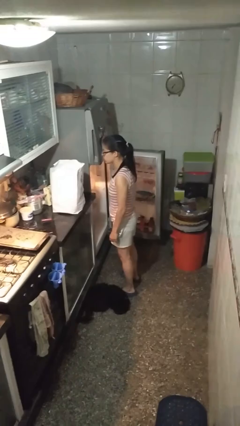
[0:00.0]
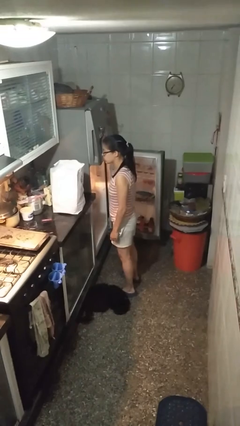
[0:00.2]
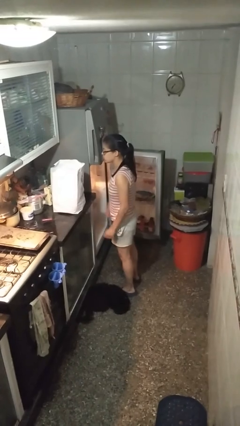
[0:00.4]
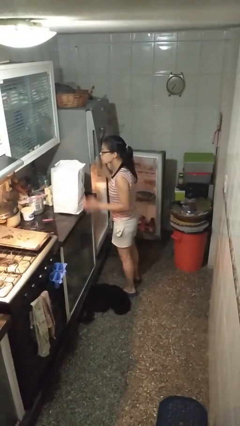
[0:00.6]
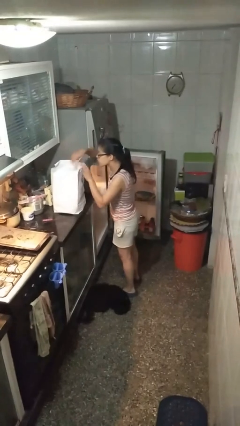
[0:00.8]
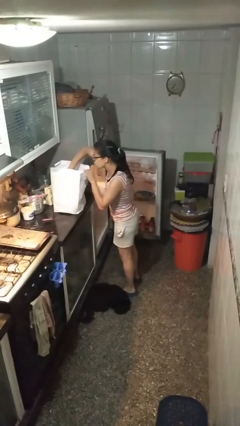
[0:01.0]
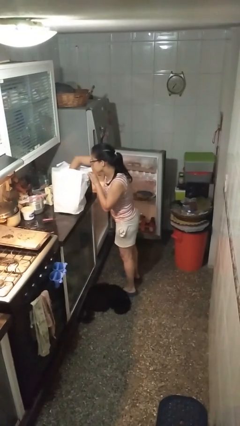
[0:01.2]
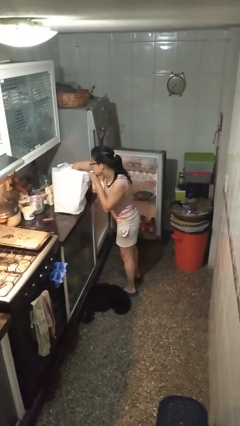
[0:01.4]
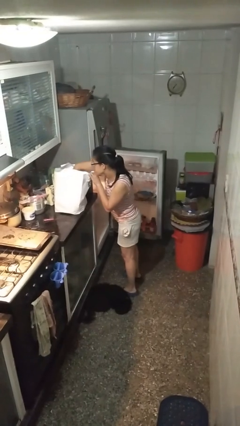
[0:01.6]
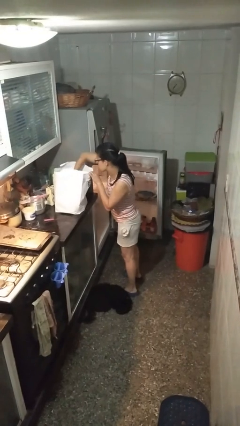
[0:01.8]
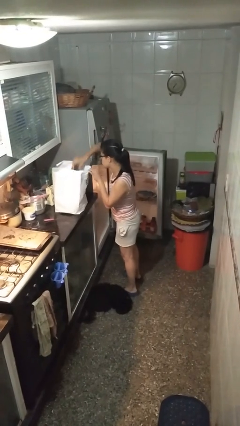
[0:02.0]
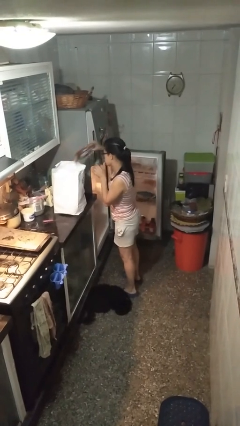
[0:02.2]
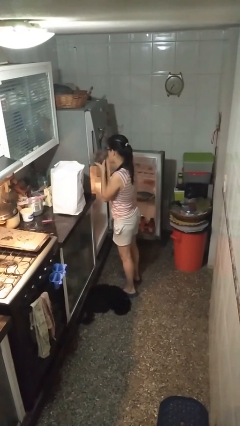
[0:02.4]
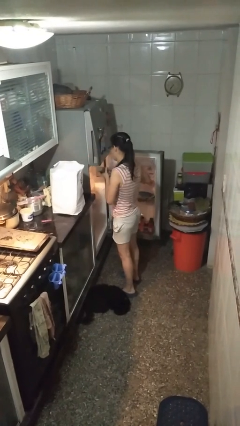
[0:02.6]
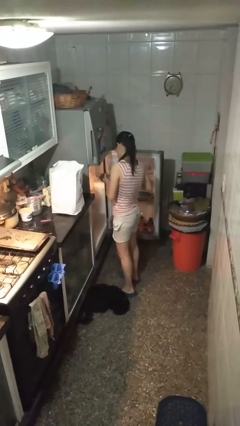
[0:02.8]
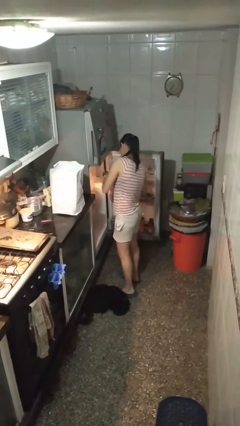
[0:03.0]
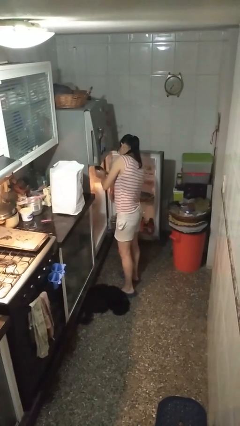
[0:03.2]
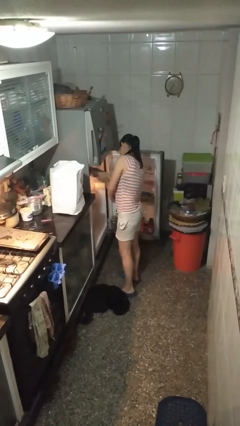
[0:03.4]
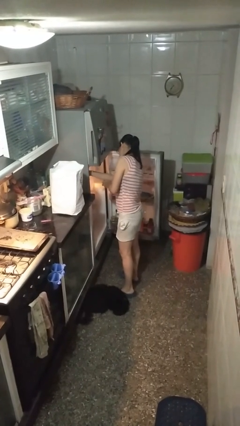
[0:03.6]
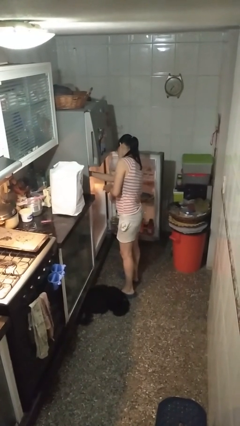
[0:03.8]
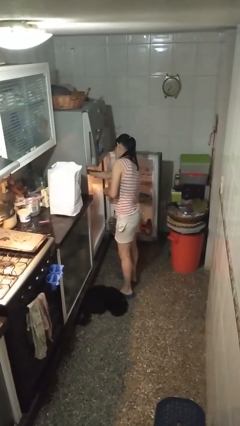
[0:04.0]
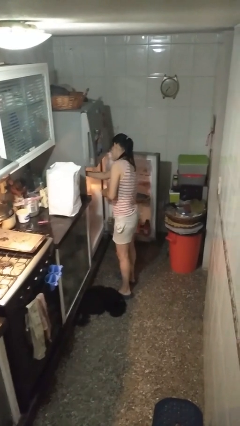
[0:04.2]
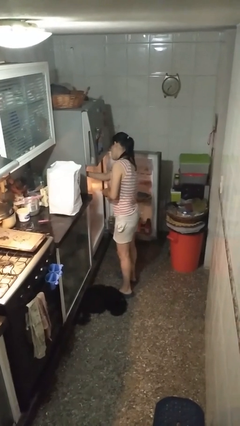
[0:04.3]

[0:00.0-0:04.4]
person loads groceries into refrigerator

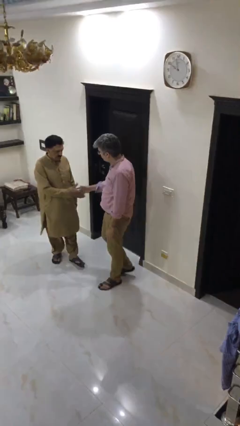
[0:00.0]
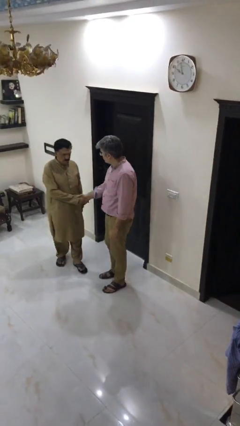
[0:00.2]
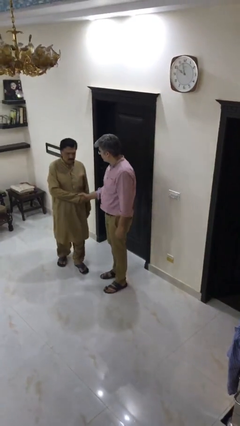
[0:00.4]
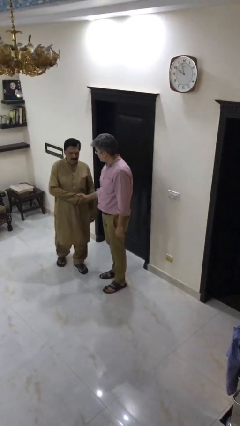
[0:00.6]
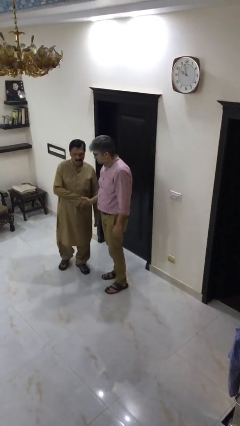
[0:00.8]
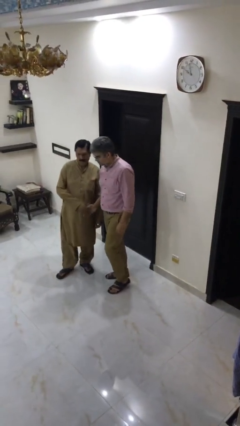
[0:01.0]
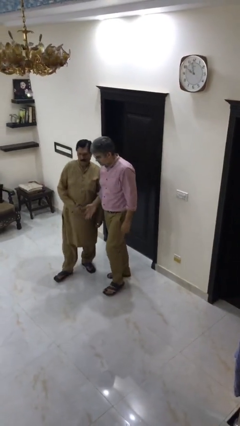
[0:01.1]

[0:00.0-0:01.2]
person shakes hand

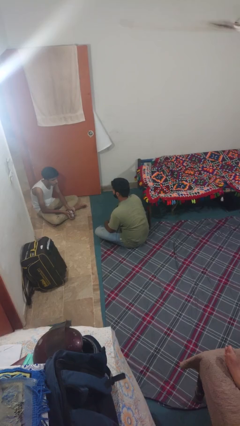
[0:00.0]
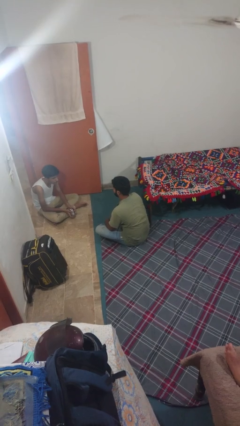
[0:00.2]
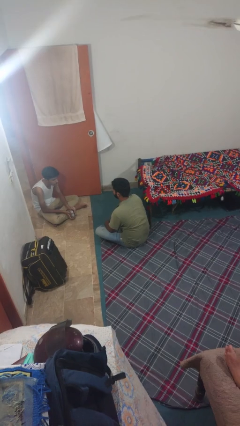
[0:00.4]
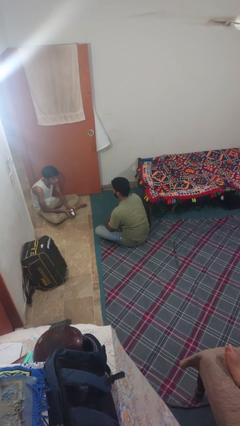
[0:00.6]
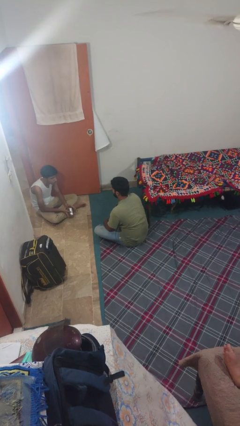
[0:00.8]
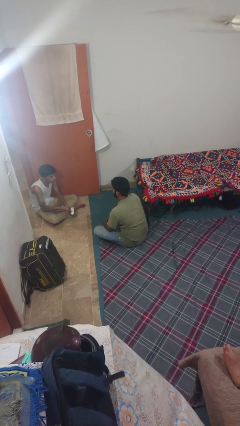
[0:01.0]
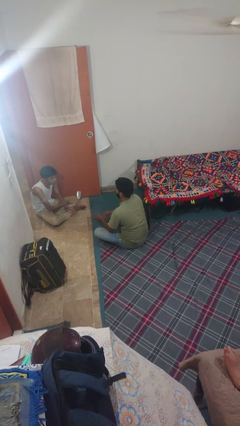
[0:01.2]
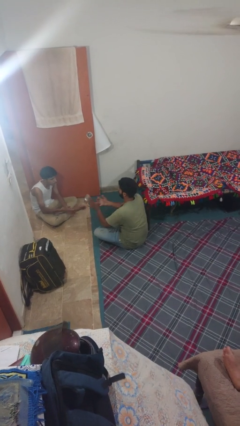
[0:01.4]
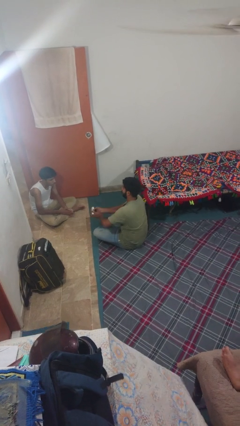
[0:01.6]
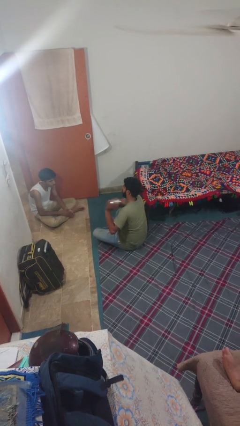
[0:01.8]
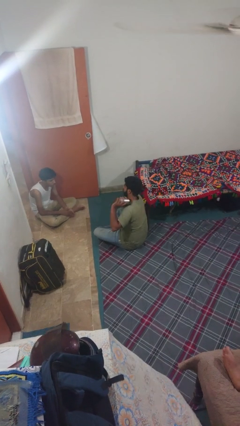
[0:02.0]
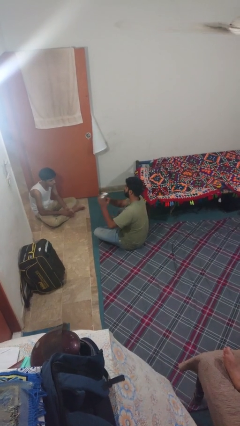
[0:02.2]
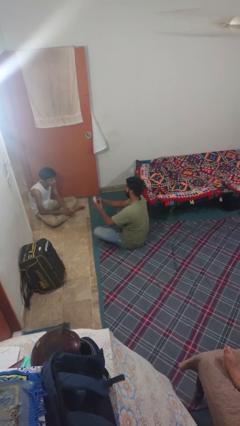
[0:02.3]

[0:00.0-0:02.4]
person catches object from person

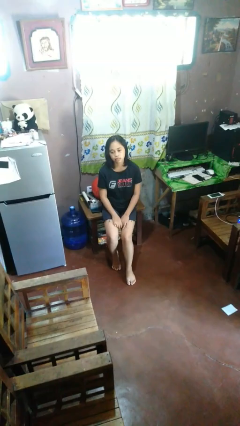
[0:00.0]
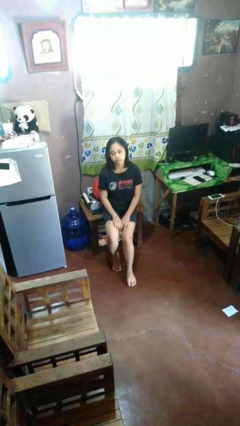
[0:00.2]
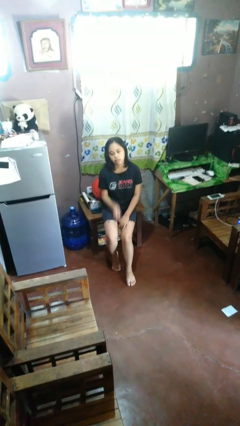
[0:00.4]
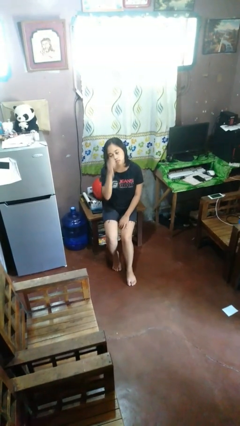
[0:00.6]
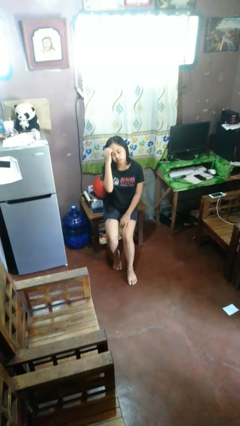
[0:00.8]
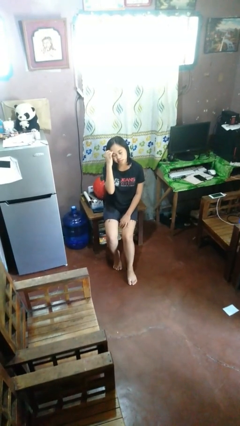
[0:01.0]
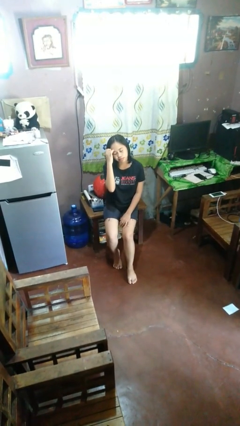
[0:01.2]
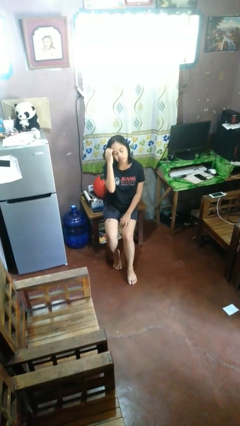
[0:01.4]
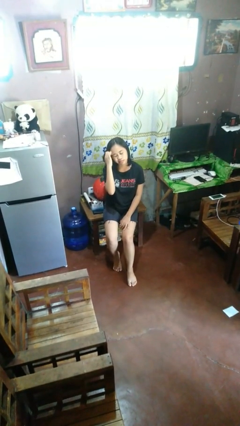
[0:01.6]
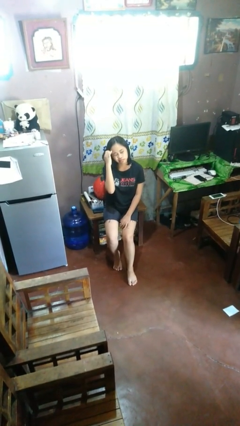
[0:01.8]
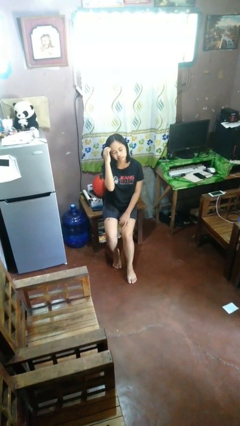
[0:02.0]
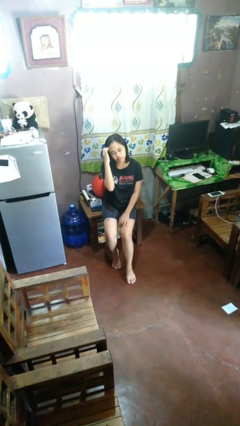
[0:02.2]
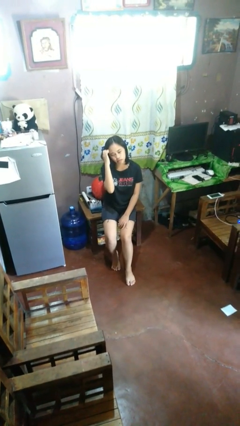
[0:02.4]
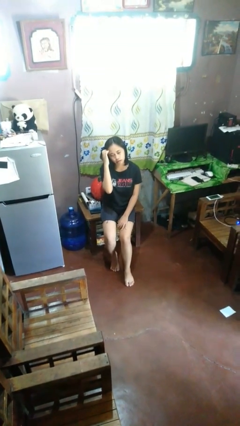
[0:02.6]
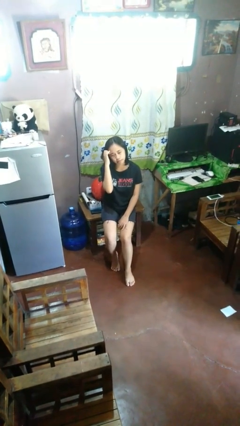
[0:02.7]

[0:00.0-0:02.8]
person scratches face

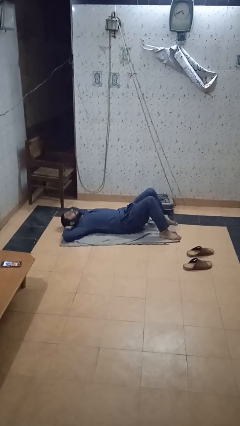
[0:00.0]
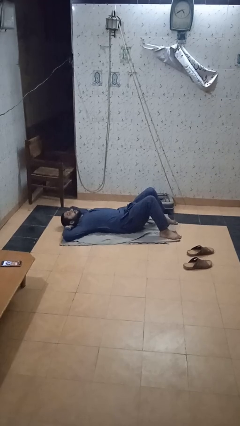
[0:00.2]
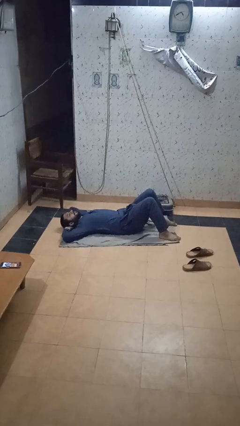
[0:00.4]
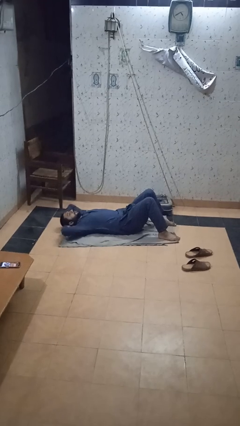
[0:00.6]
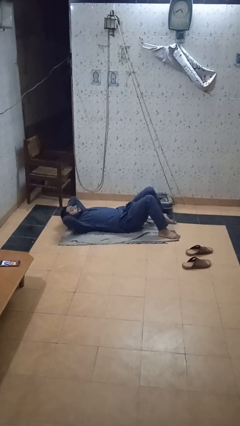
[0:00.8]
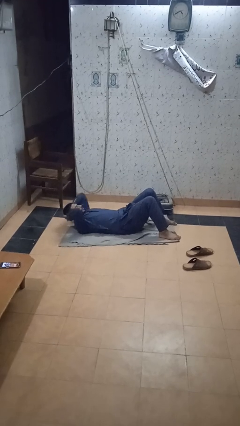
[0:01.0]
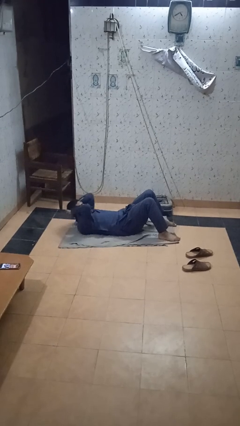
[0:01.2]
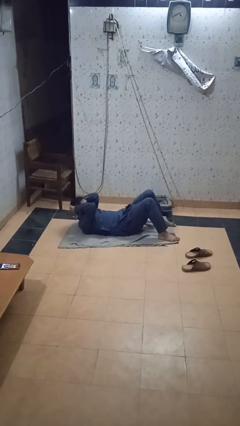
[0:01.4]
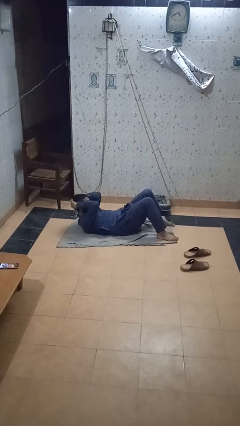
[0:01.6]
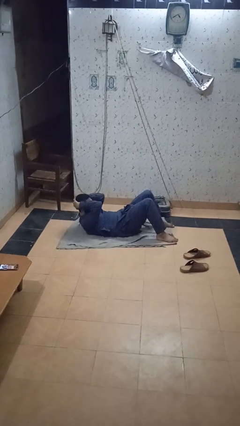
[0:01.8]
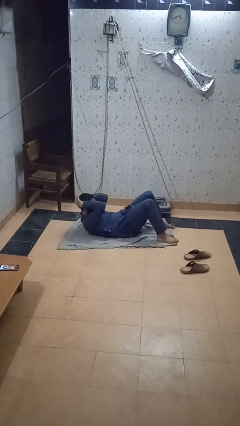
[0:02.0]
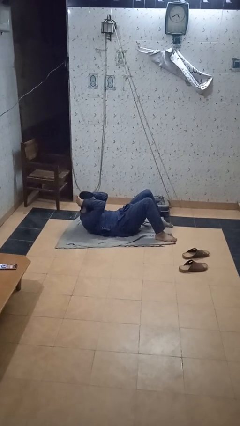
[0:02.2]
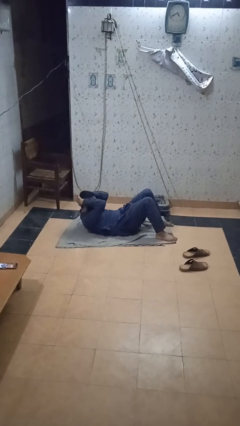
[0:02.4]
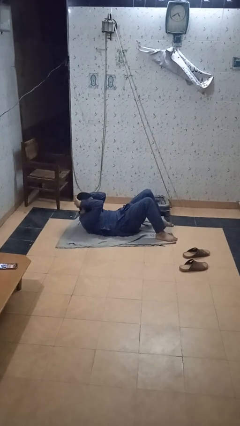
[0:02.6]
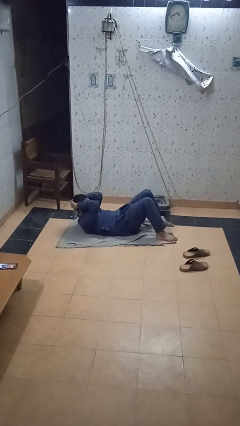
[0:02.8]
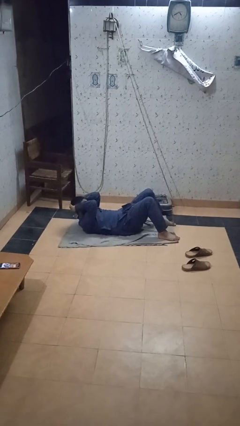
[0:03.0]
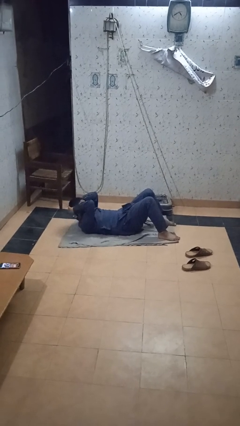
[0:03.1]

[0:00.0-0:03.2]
person exercises with situp

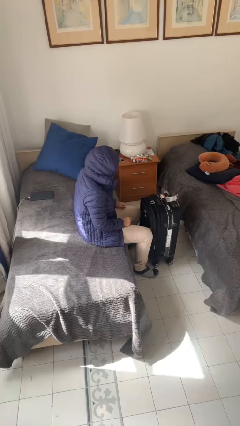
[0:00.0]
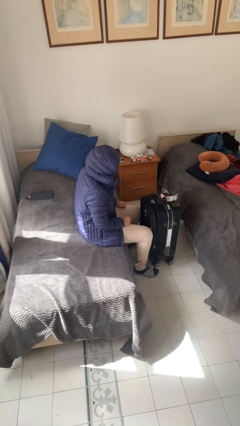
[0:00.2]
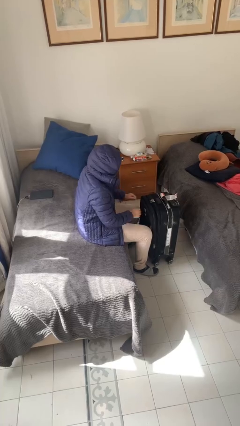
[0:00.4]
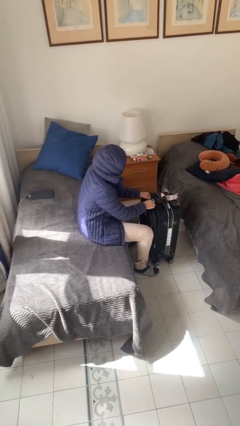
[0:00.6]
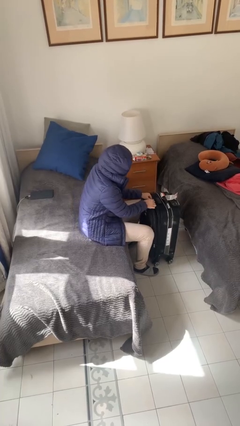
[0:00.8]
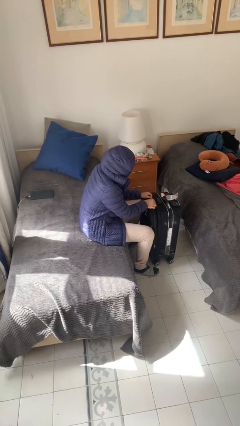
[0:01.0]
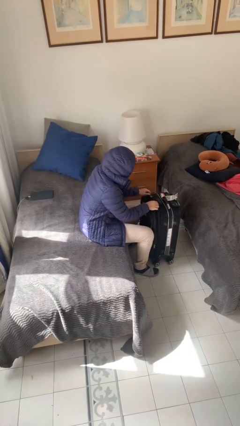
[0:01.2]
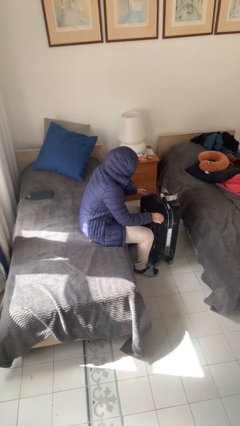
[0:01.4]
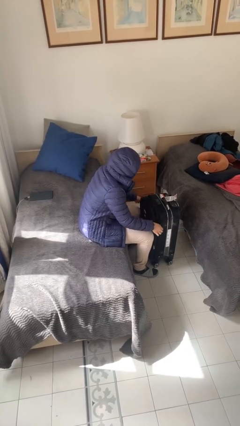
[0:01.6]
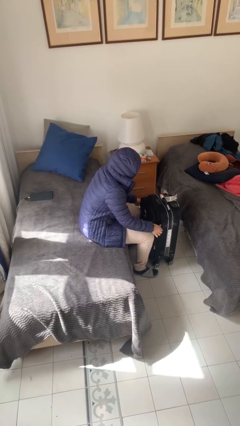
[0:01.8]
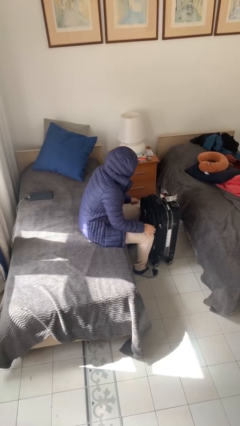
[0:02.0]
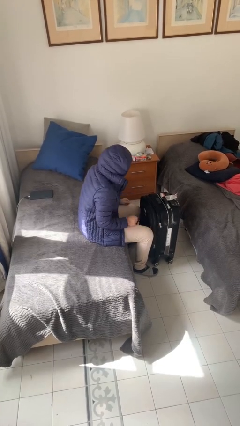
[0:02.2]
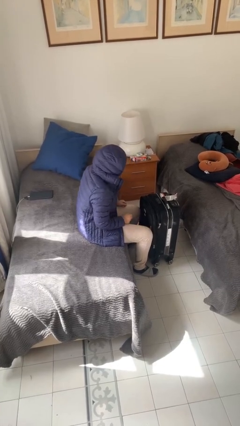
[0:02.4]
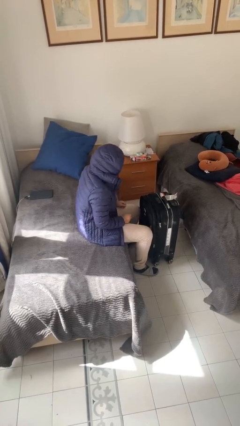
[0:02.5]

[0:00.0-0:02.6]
person opens suitcase

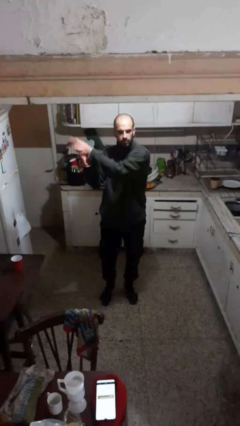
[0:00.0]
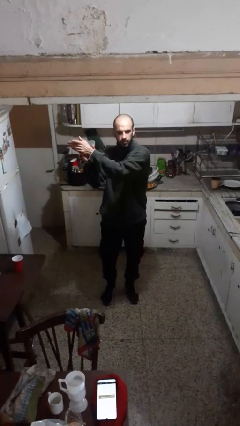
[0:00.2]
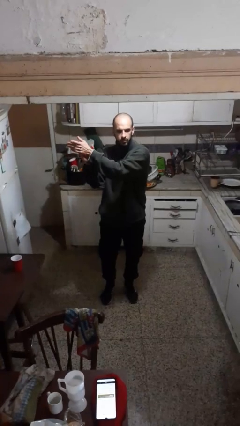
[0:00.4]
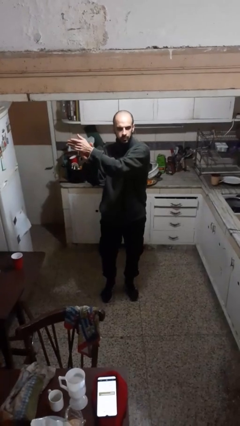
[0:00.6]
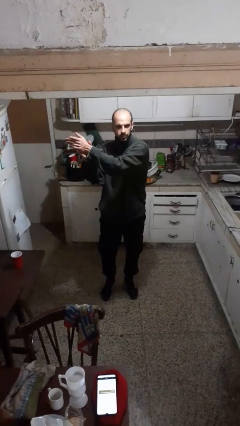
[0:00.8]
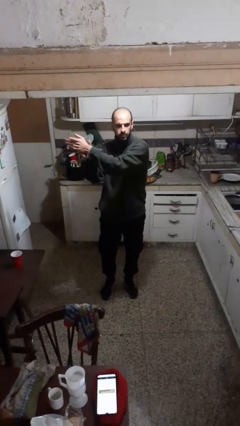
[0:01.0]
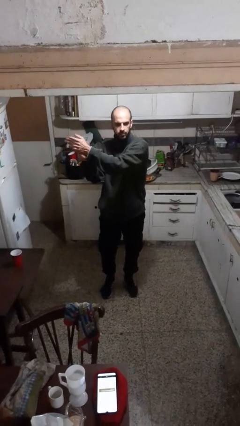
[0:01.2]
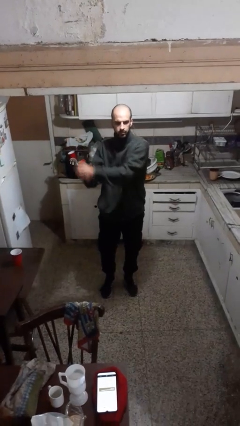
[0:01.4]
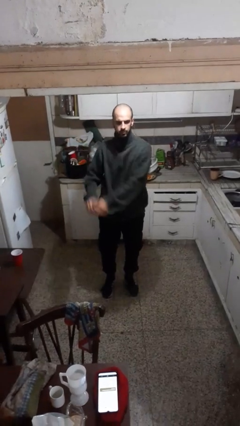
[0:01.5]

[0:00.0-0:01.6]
person claps hands
